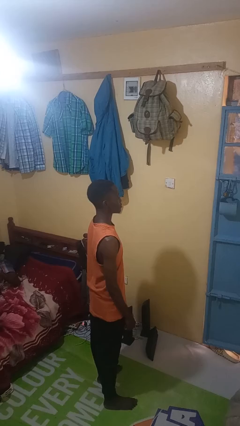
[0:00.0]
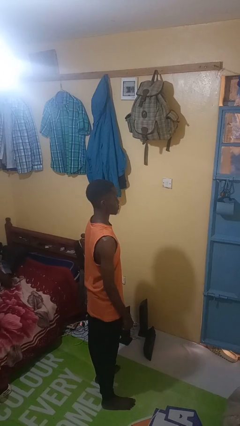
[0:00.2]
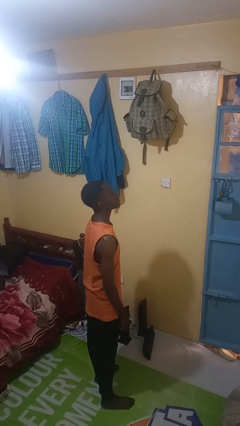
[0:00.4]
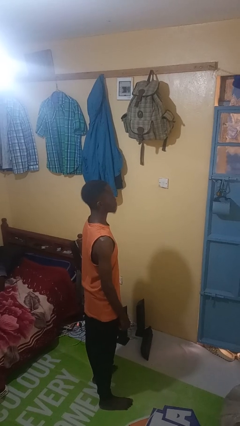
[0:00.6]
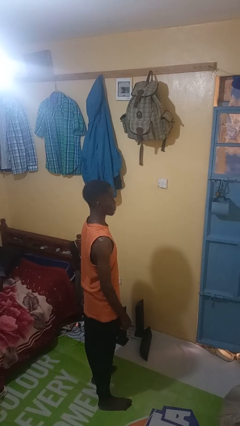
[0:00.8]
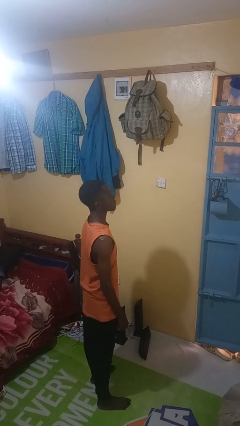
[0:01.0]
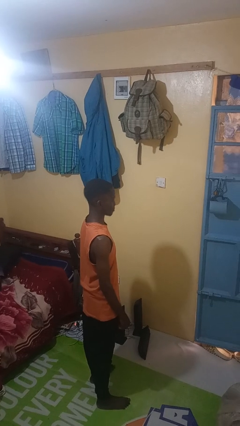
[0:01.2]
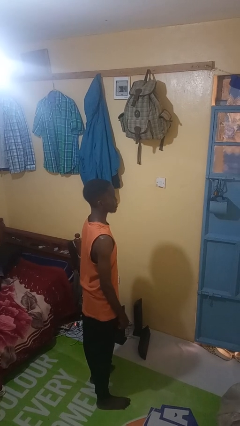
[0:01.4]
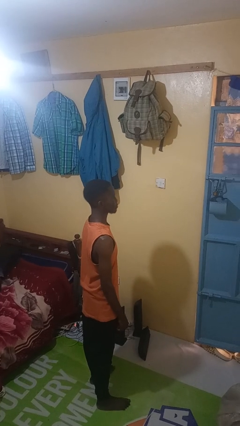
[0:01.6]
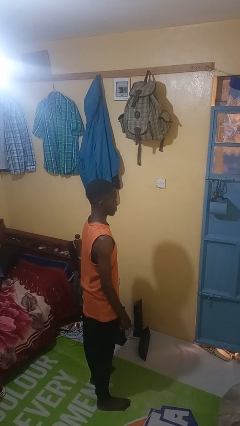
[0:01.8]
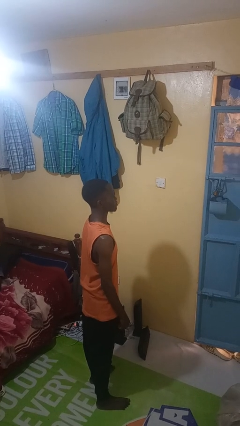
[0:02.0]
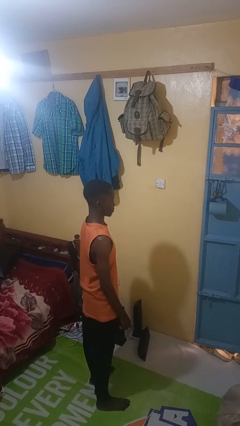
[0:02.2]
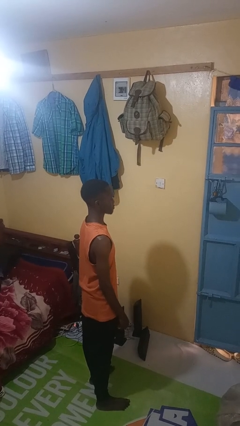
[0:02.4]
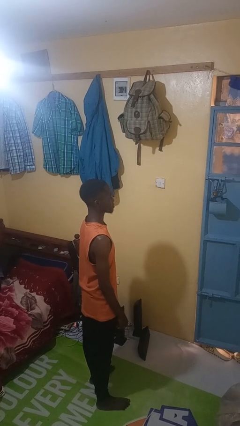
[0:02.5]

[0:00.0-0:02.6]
person nods head

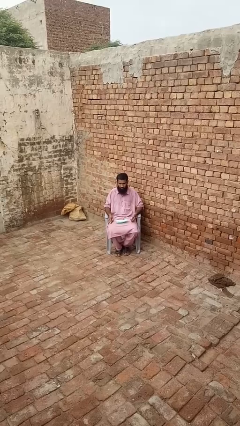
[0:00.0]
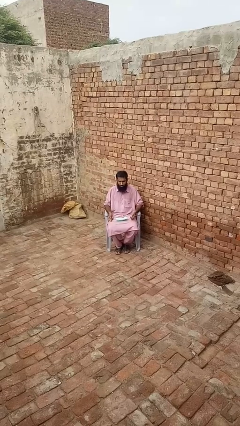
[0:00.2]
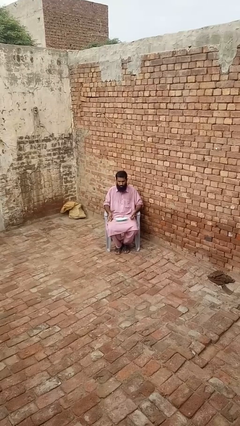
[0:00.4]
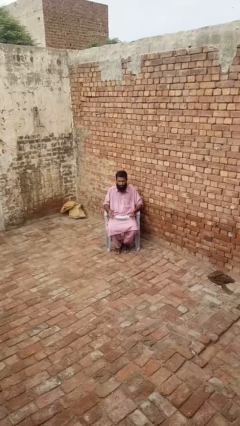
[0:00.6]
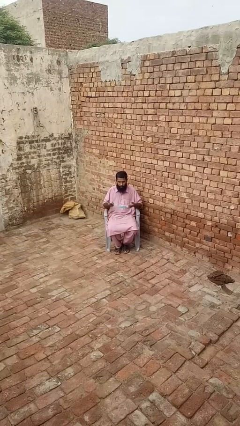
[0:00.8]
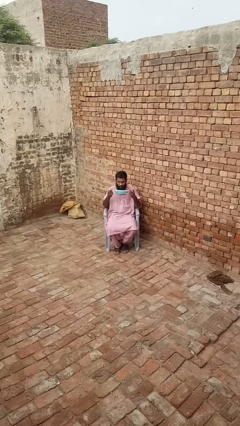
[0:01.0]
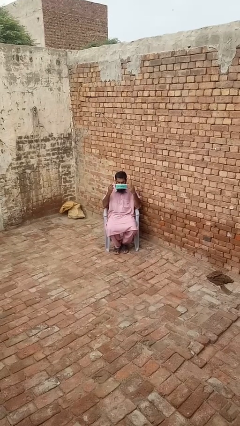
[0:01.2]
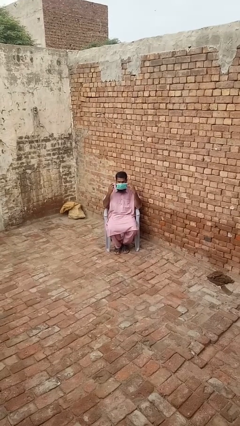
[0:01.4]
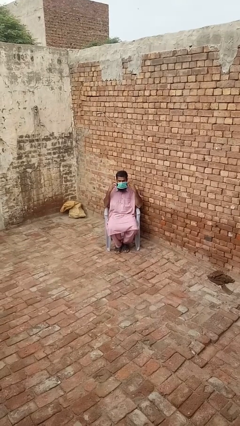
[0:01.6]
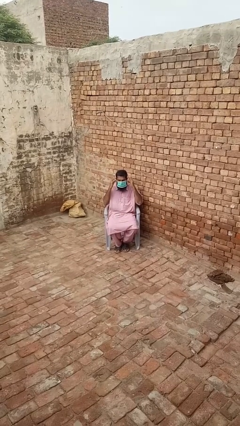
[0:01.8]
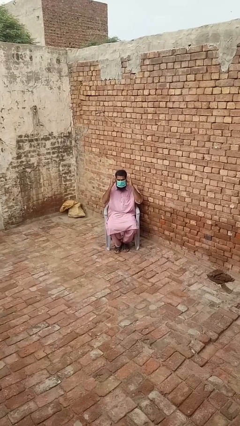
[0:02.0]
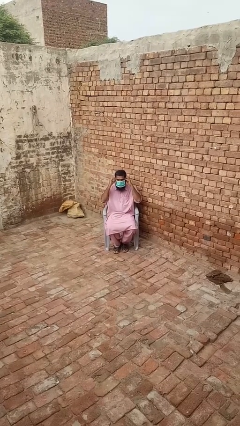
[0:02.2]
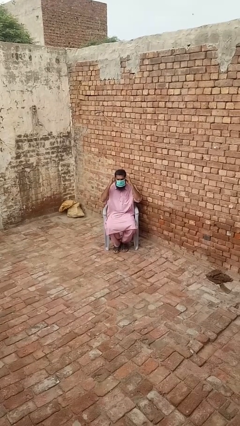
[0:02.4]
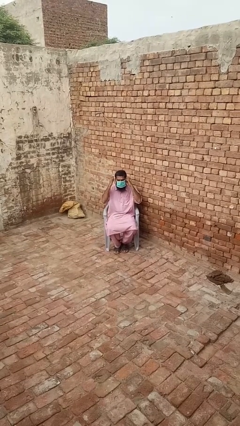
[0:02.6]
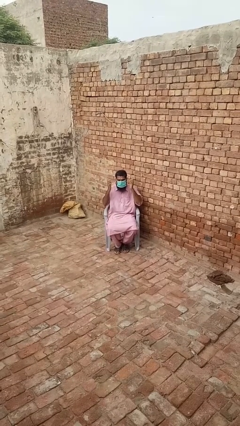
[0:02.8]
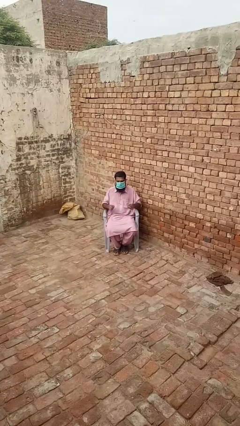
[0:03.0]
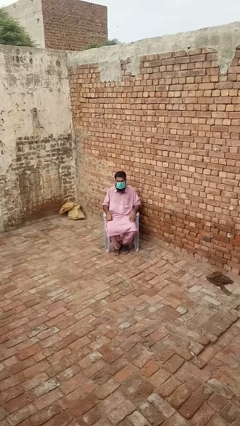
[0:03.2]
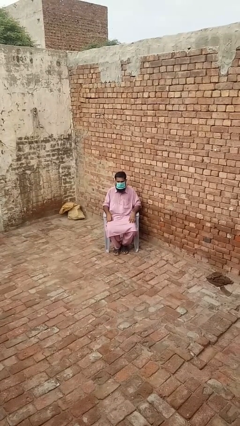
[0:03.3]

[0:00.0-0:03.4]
person puts on facemask

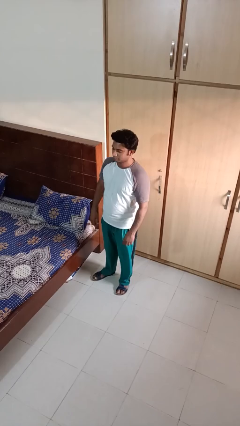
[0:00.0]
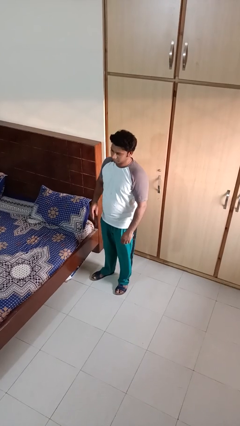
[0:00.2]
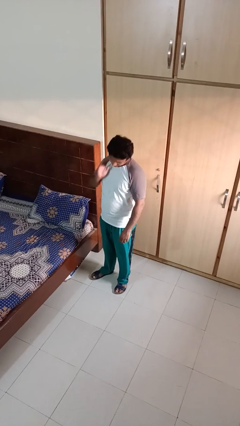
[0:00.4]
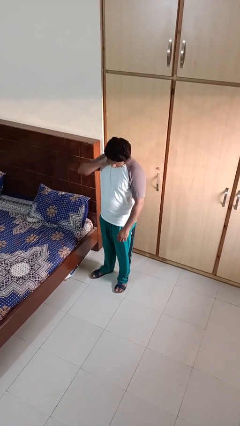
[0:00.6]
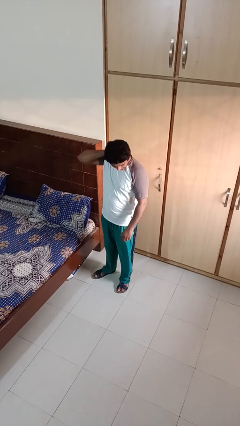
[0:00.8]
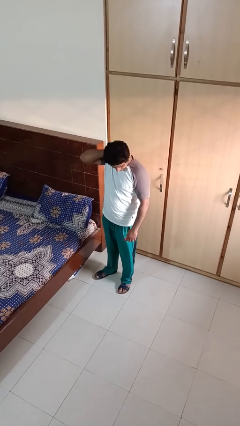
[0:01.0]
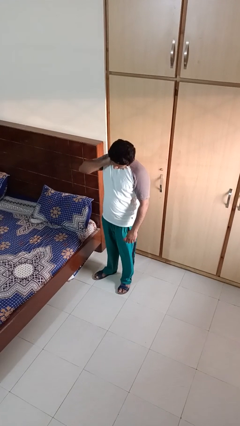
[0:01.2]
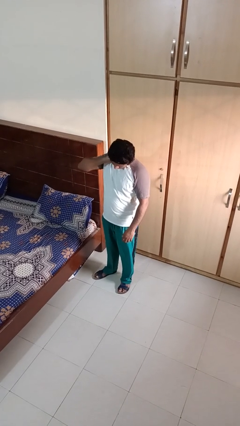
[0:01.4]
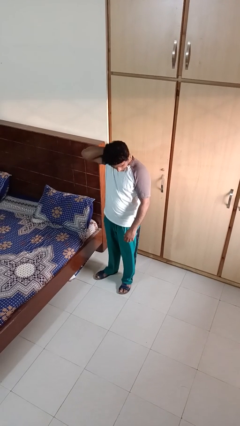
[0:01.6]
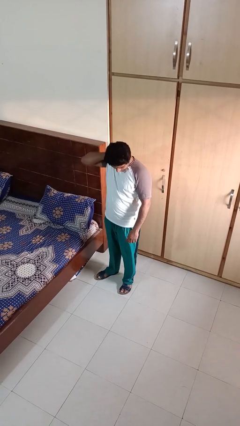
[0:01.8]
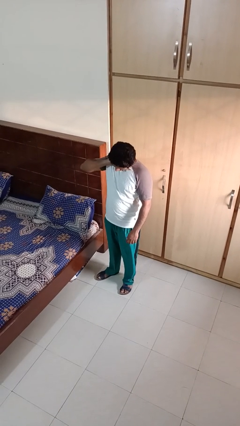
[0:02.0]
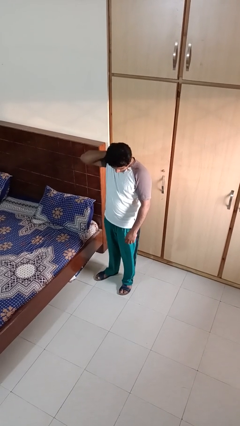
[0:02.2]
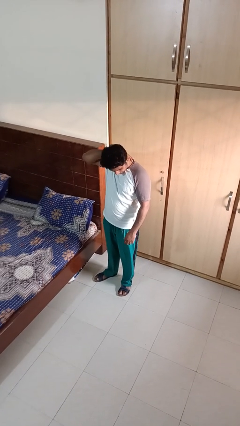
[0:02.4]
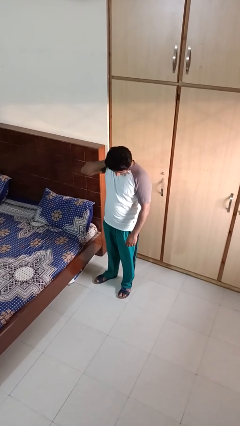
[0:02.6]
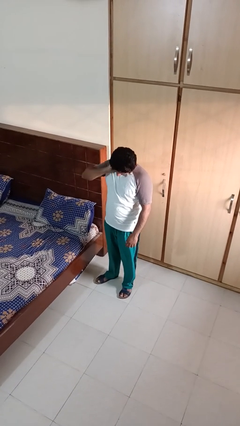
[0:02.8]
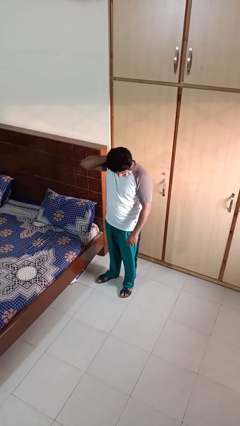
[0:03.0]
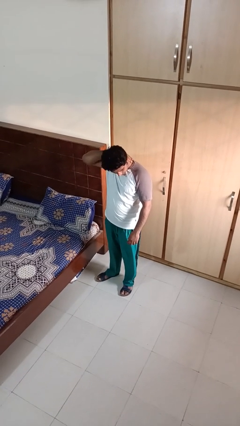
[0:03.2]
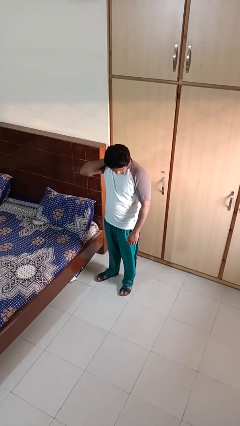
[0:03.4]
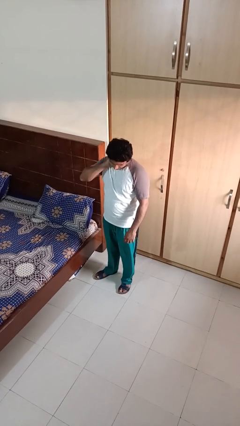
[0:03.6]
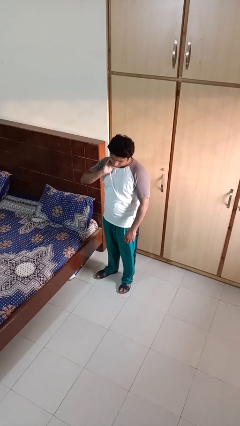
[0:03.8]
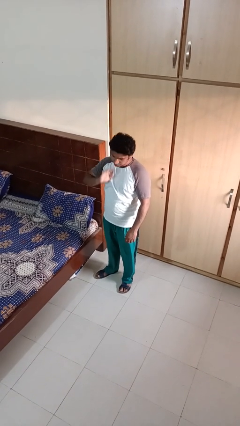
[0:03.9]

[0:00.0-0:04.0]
person rubs neck

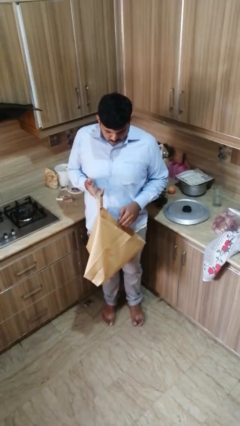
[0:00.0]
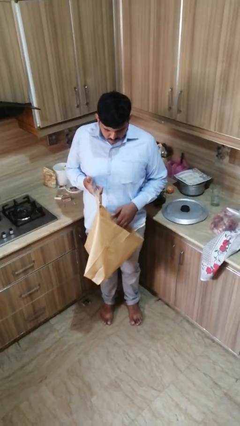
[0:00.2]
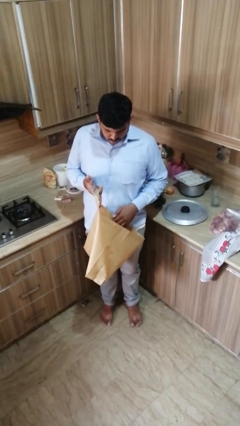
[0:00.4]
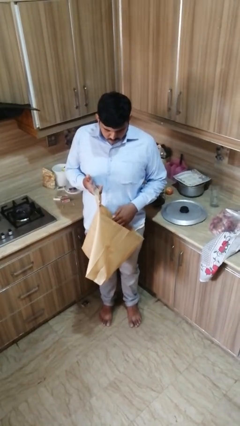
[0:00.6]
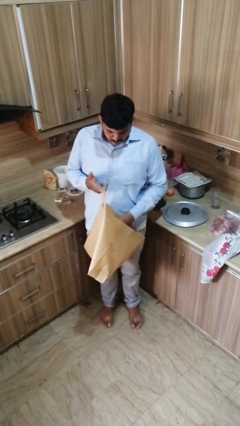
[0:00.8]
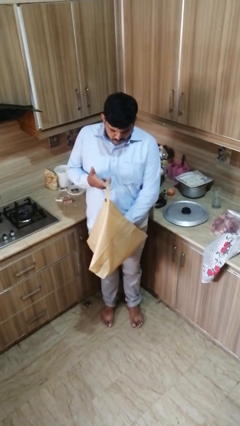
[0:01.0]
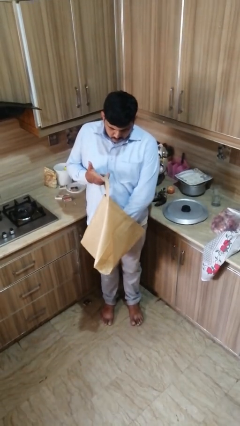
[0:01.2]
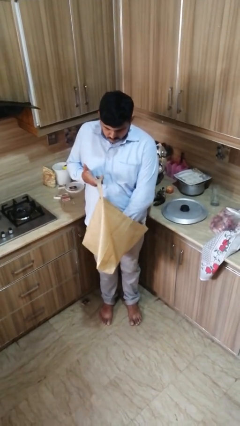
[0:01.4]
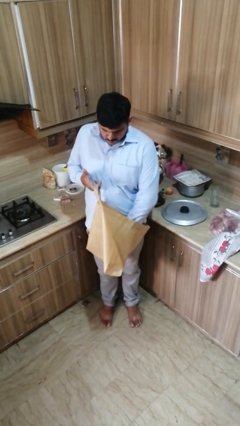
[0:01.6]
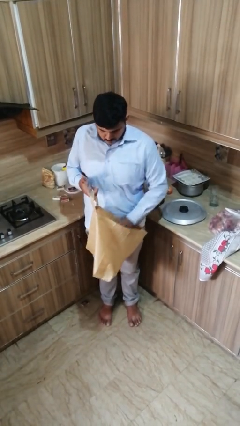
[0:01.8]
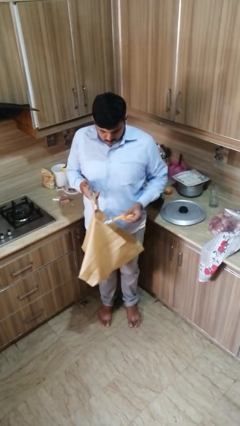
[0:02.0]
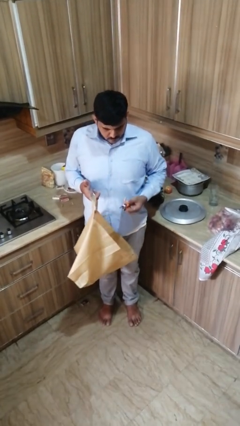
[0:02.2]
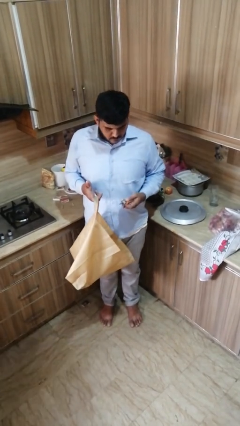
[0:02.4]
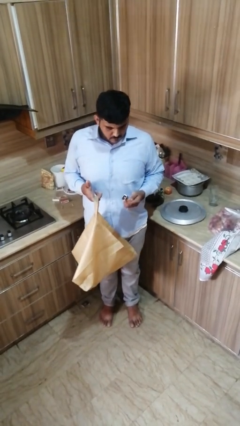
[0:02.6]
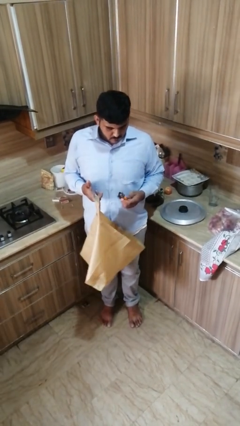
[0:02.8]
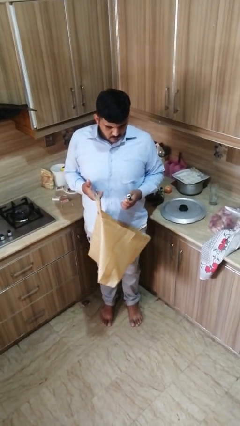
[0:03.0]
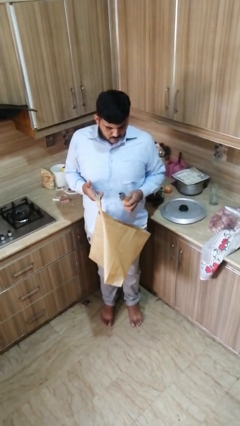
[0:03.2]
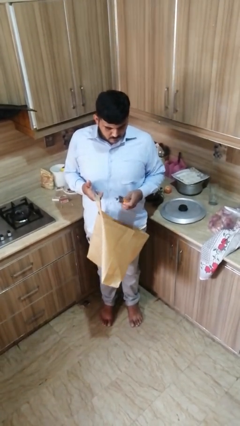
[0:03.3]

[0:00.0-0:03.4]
person takes object from bag

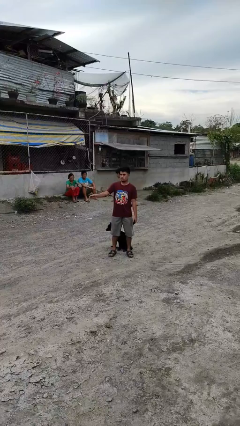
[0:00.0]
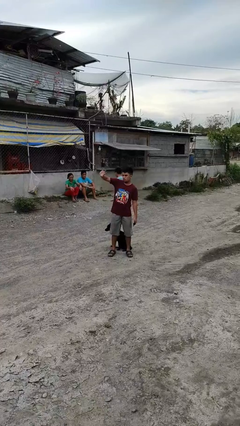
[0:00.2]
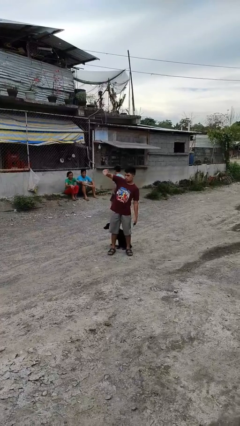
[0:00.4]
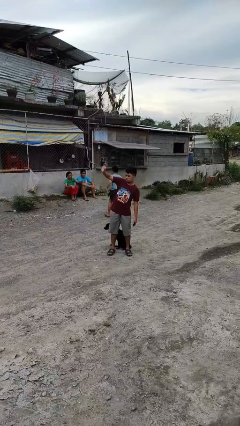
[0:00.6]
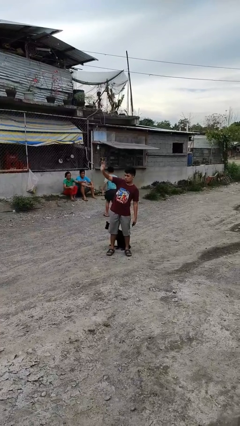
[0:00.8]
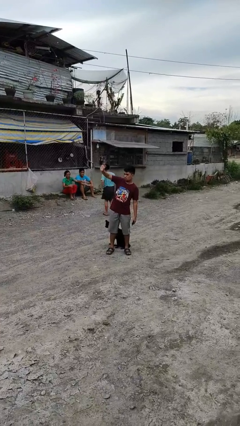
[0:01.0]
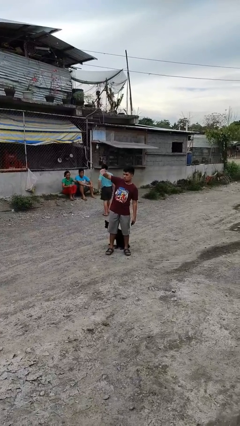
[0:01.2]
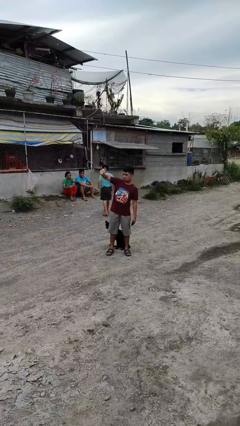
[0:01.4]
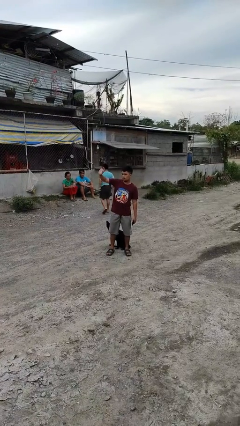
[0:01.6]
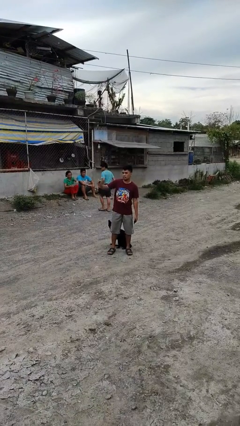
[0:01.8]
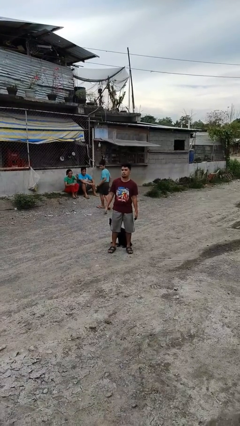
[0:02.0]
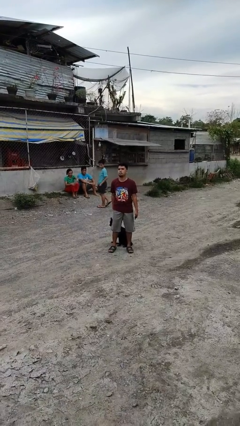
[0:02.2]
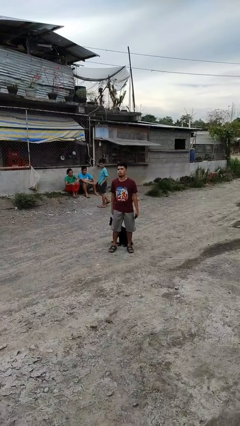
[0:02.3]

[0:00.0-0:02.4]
person waves at person

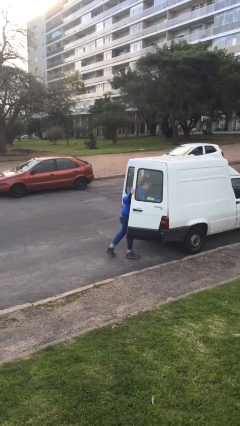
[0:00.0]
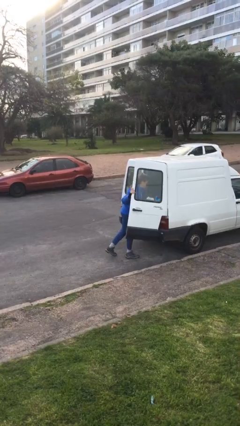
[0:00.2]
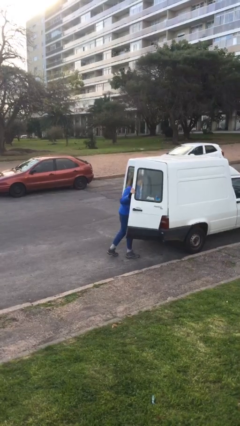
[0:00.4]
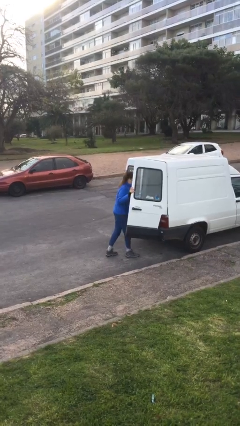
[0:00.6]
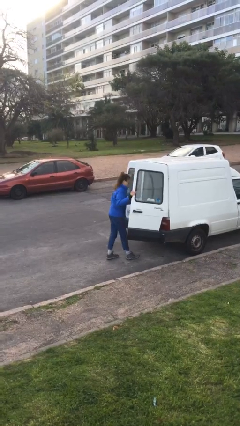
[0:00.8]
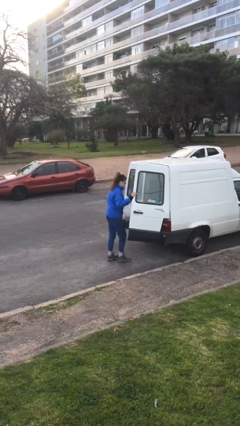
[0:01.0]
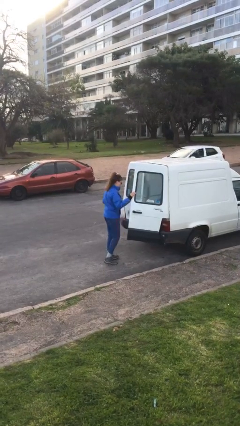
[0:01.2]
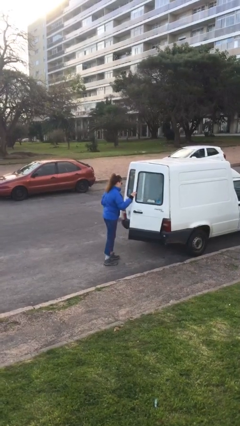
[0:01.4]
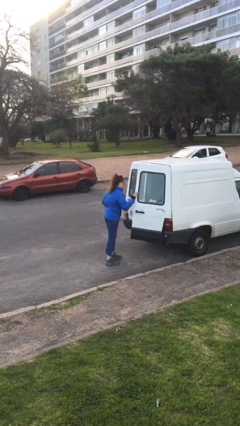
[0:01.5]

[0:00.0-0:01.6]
person unloads car
